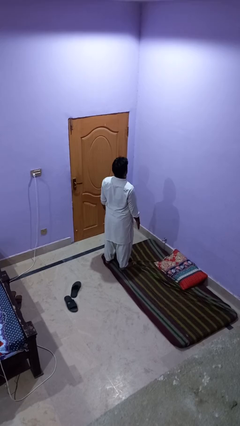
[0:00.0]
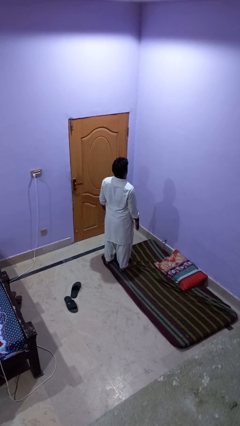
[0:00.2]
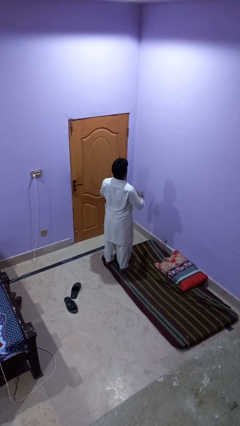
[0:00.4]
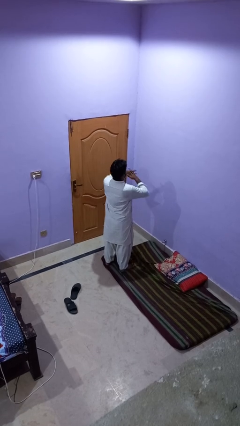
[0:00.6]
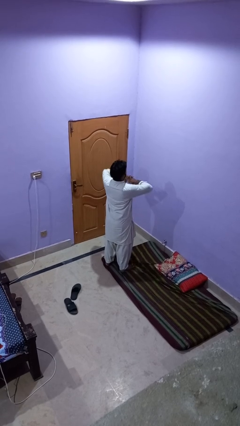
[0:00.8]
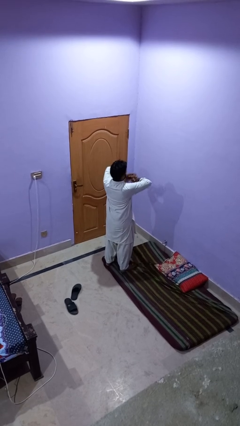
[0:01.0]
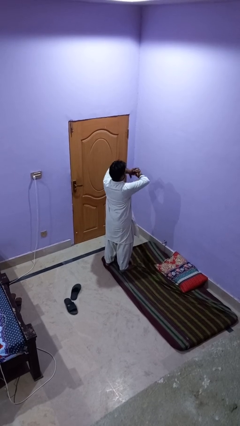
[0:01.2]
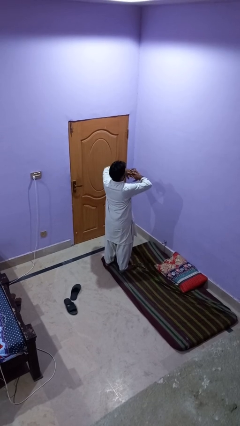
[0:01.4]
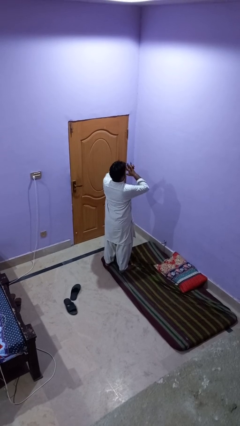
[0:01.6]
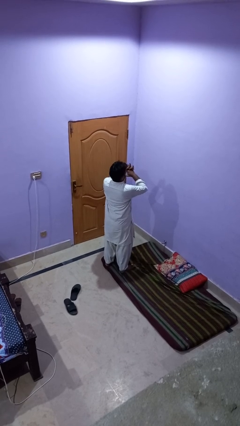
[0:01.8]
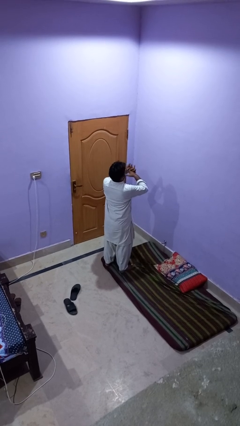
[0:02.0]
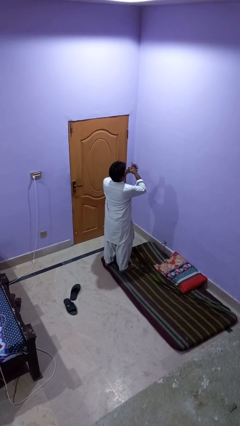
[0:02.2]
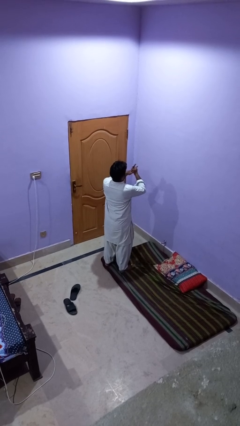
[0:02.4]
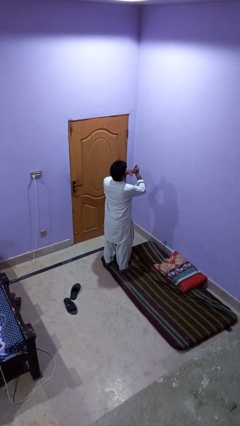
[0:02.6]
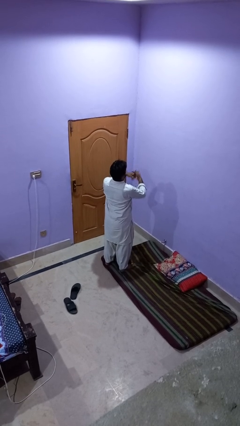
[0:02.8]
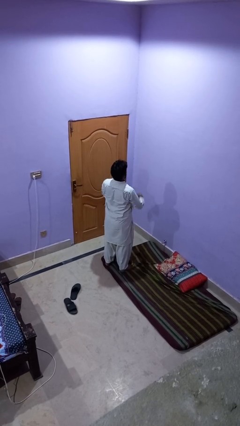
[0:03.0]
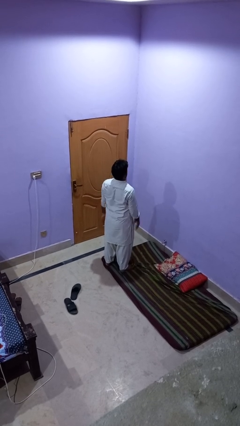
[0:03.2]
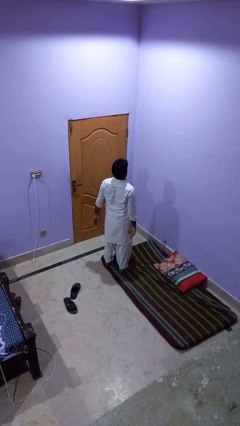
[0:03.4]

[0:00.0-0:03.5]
person snaps fingers

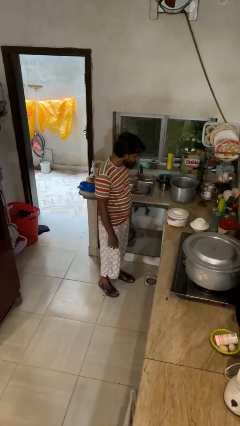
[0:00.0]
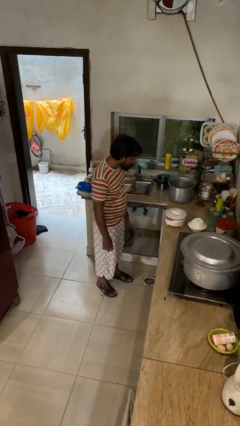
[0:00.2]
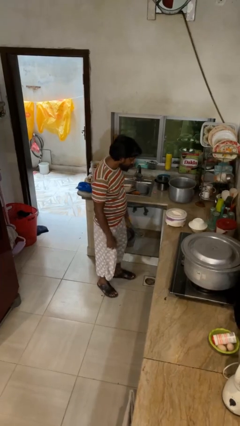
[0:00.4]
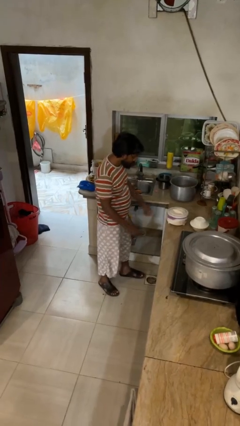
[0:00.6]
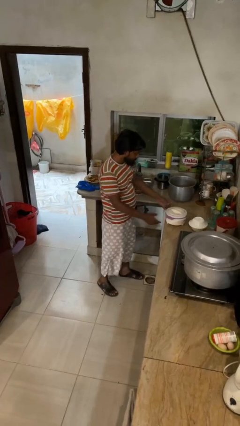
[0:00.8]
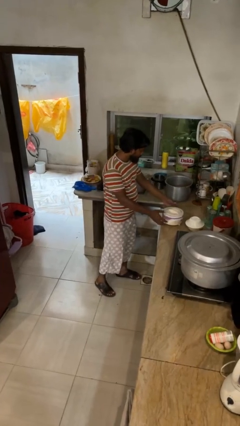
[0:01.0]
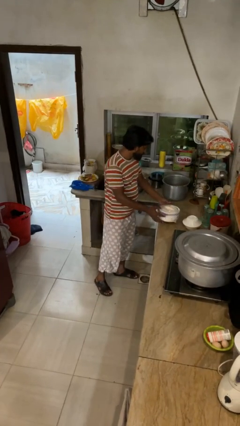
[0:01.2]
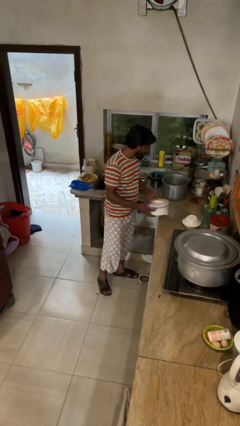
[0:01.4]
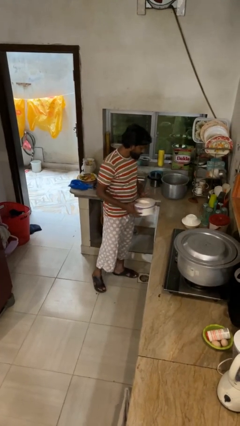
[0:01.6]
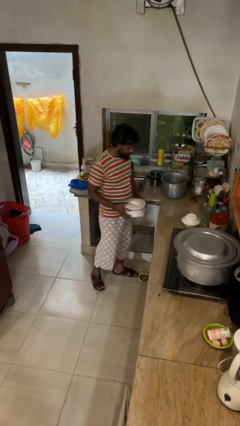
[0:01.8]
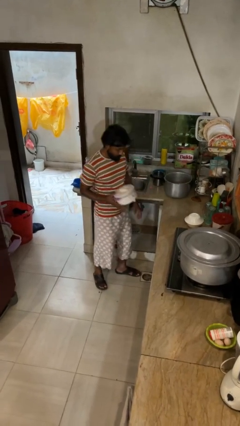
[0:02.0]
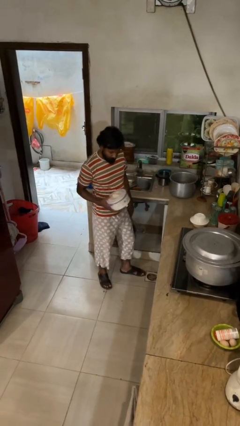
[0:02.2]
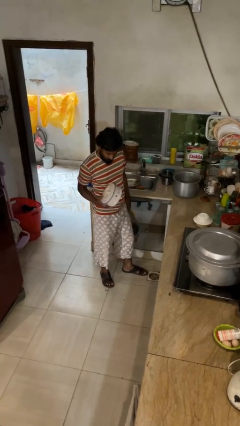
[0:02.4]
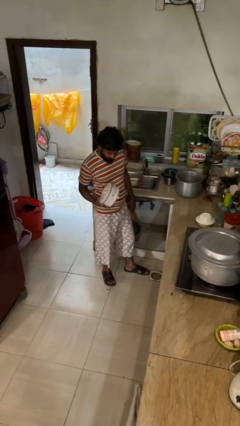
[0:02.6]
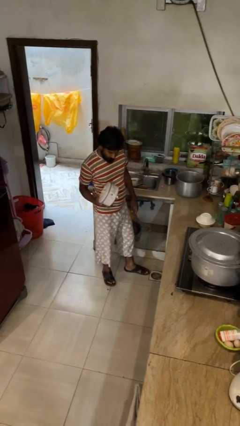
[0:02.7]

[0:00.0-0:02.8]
person picks up object from countertop

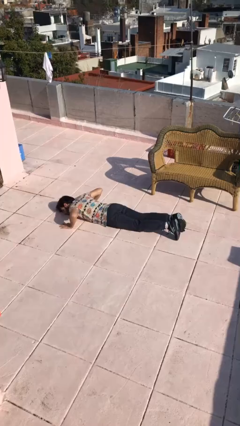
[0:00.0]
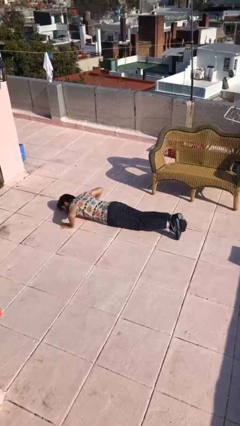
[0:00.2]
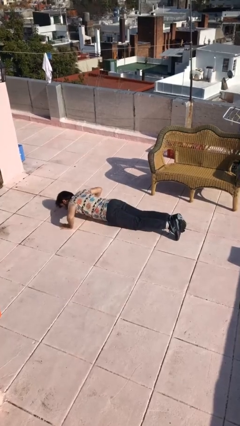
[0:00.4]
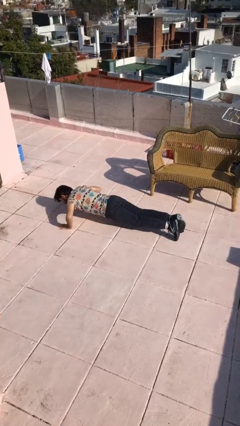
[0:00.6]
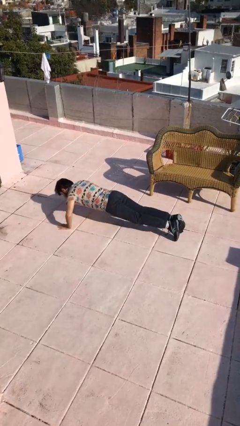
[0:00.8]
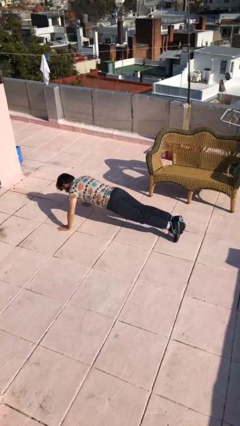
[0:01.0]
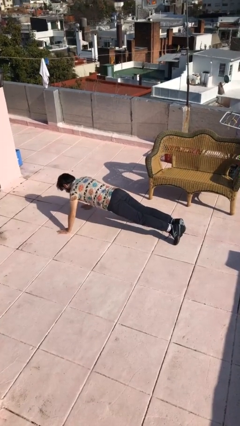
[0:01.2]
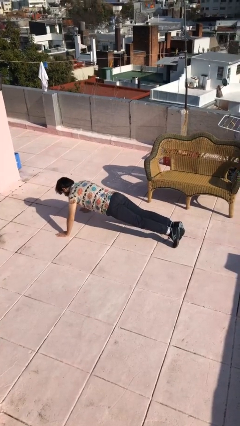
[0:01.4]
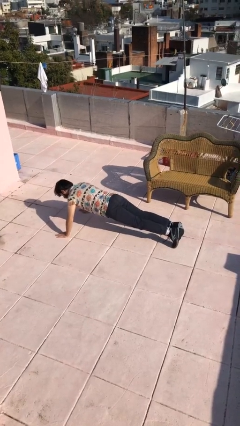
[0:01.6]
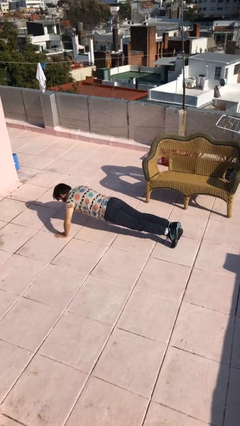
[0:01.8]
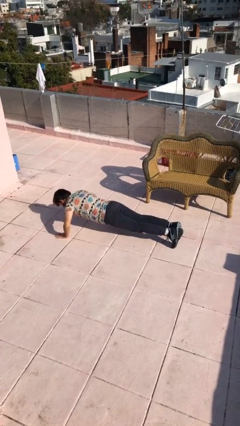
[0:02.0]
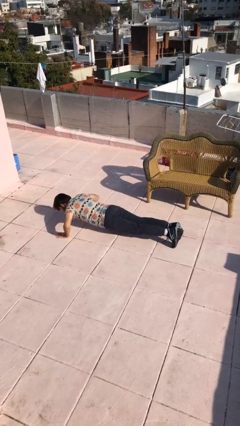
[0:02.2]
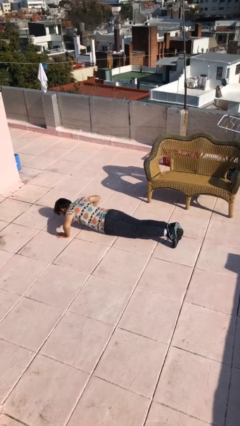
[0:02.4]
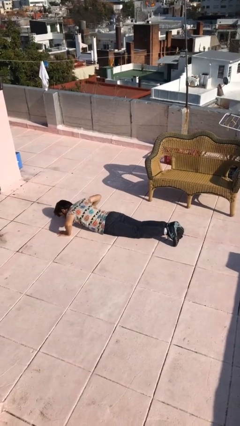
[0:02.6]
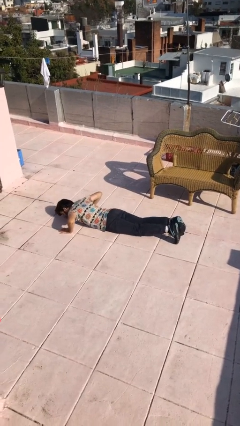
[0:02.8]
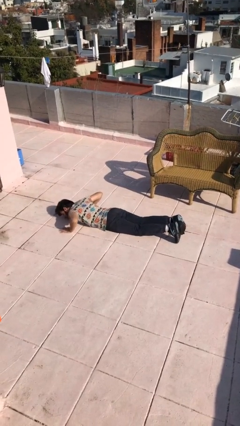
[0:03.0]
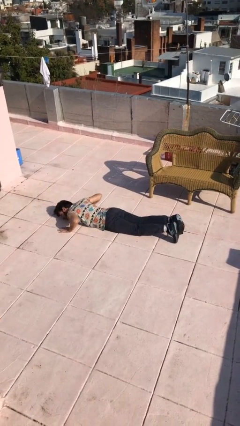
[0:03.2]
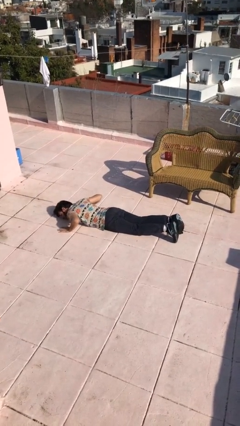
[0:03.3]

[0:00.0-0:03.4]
person exercises with pushup

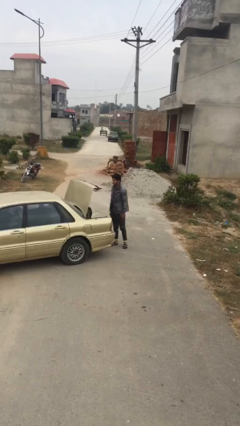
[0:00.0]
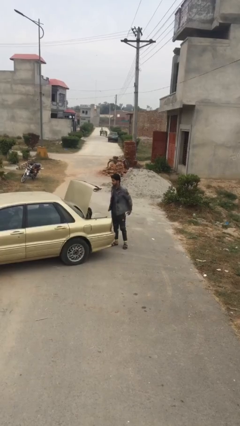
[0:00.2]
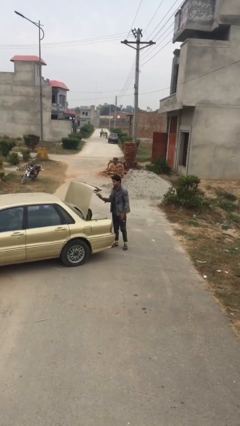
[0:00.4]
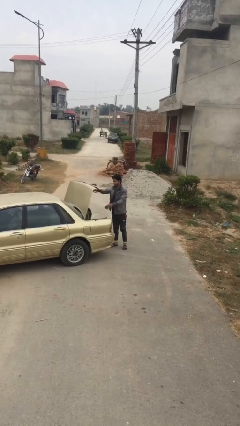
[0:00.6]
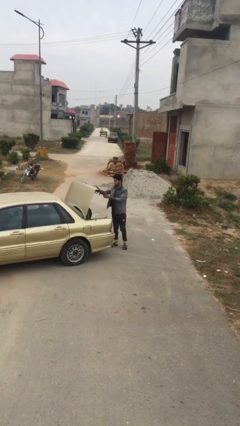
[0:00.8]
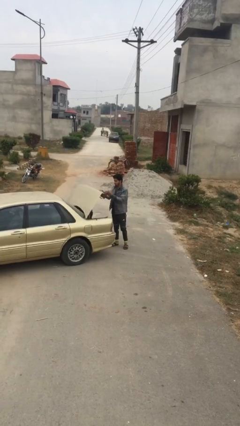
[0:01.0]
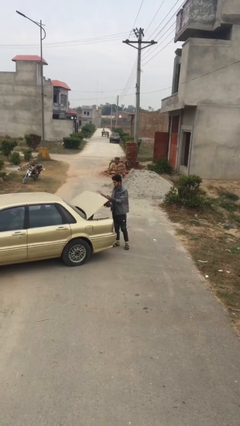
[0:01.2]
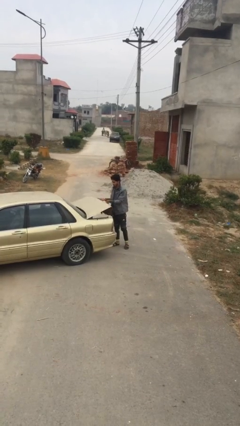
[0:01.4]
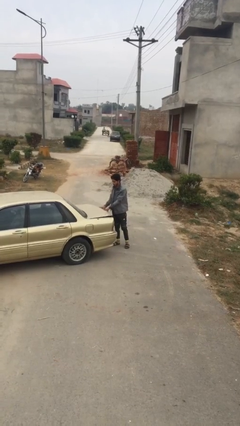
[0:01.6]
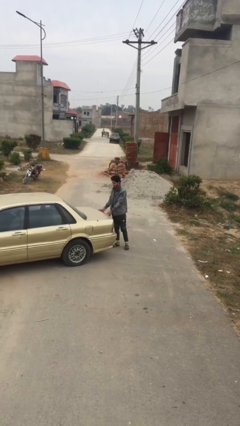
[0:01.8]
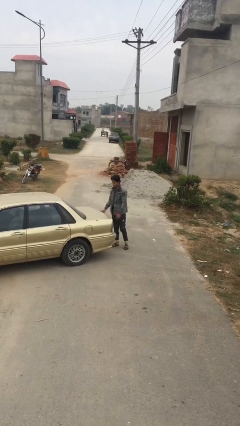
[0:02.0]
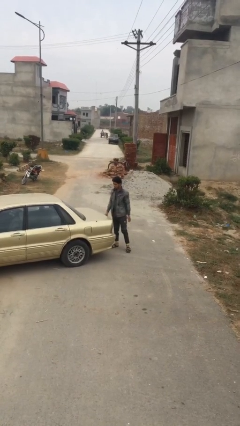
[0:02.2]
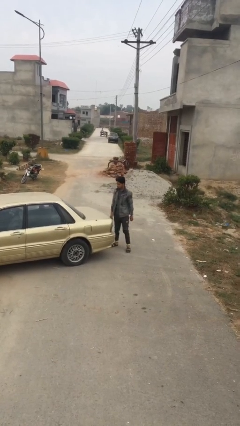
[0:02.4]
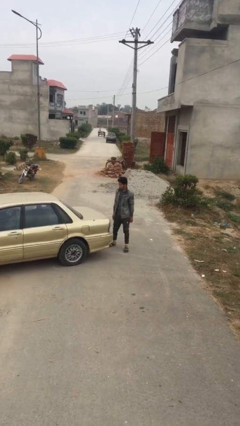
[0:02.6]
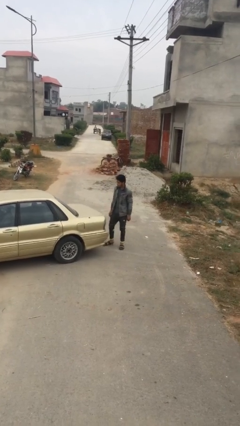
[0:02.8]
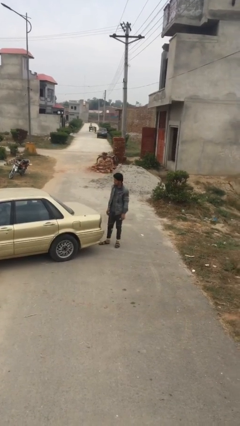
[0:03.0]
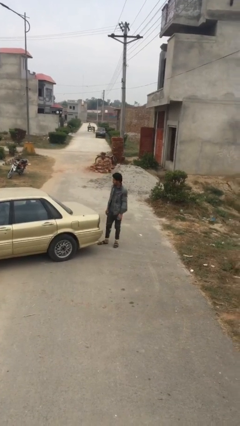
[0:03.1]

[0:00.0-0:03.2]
person closes car trunk

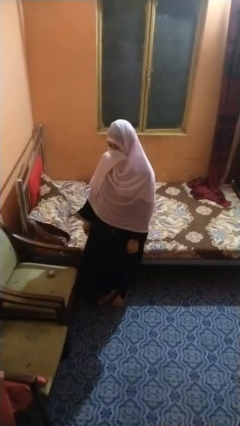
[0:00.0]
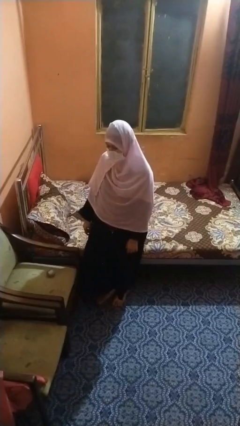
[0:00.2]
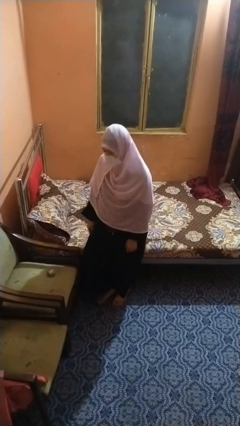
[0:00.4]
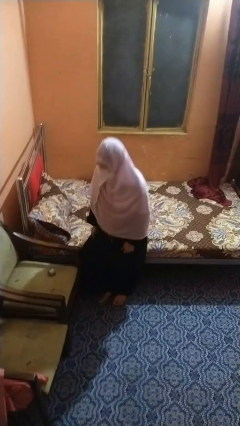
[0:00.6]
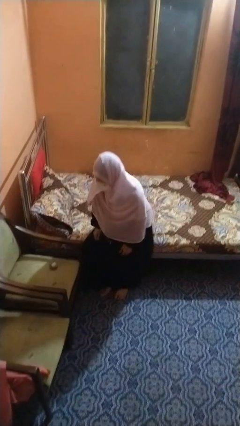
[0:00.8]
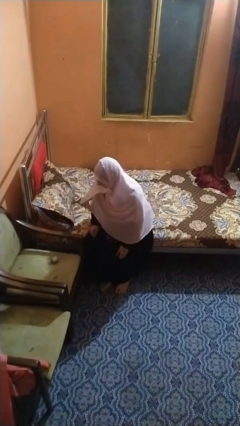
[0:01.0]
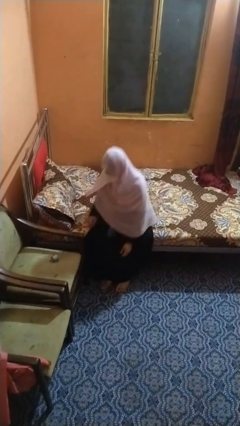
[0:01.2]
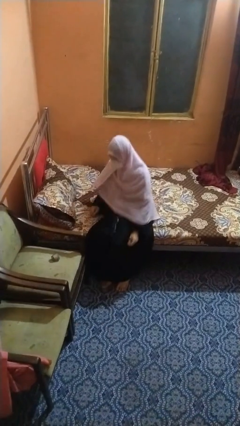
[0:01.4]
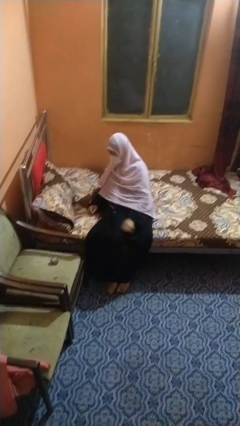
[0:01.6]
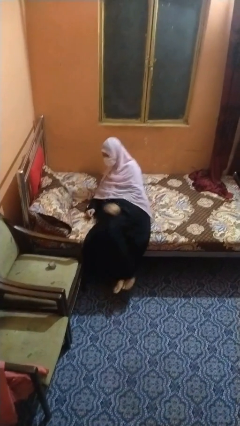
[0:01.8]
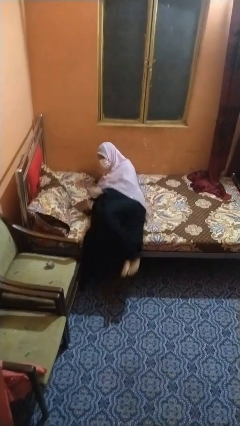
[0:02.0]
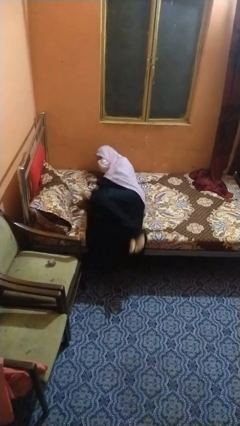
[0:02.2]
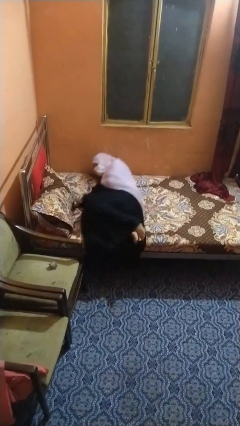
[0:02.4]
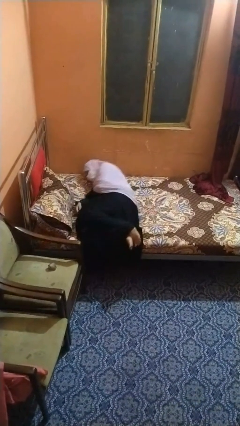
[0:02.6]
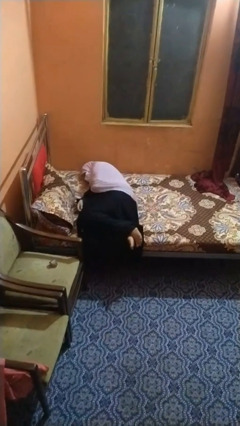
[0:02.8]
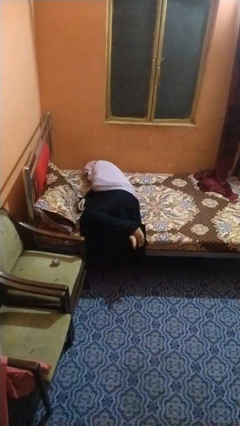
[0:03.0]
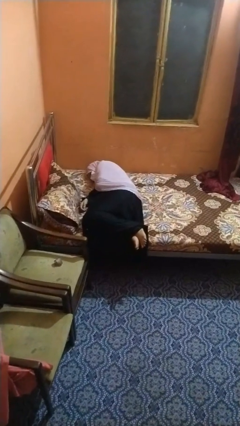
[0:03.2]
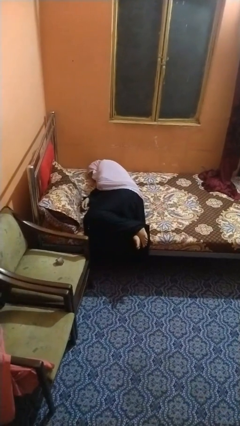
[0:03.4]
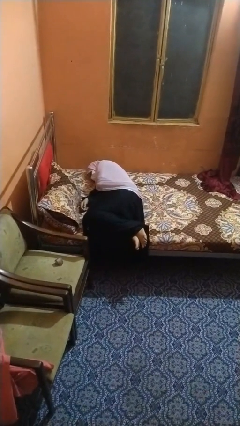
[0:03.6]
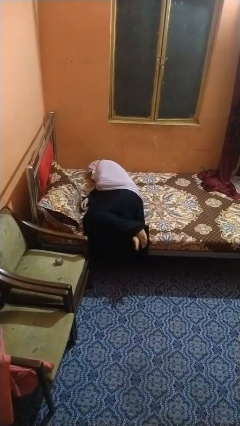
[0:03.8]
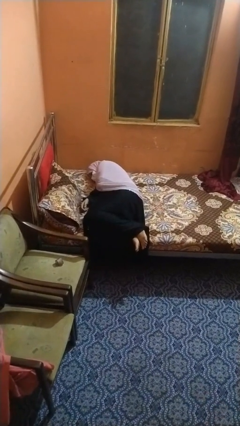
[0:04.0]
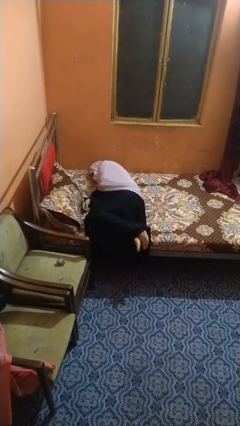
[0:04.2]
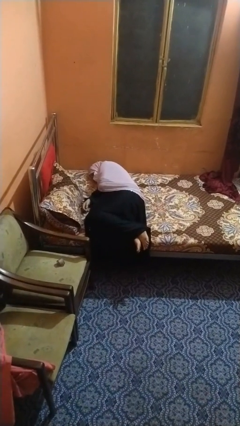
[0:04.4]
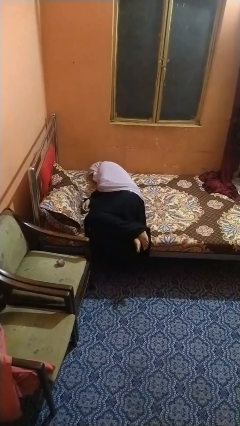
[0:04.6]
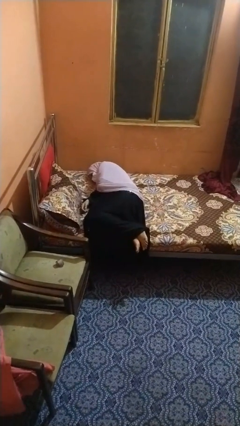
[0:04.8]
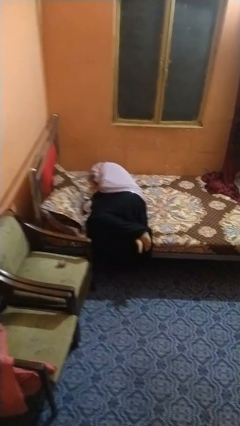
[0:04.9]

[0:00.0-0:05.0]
person lies down on bed
